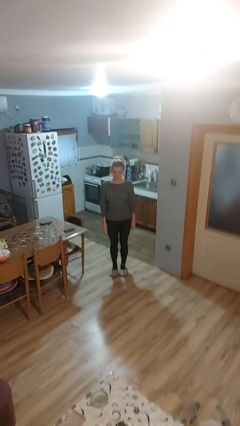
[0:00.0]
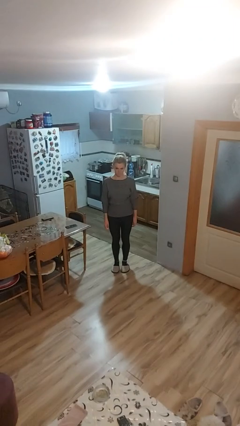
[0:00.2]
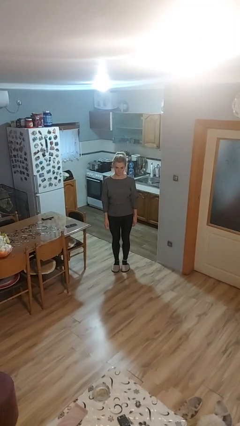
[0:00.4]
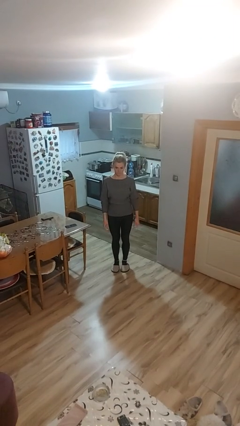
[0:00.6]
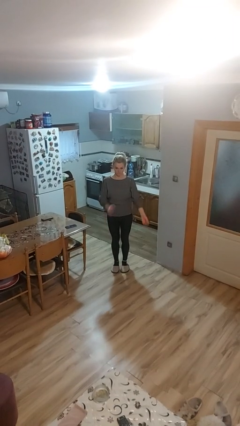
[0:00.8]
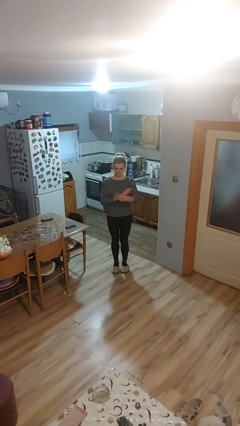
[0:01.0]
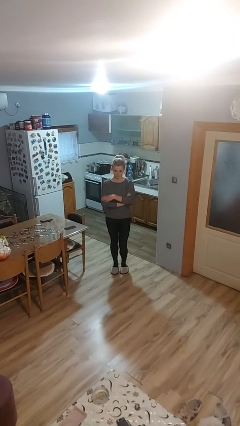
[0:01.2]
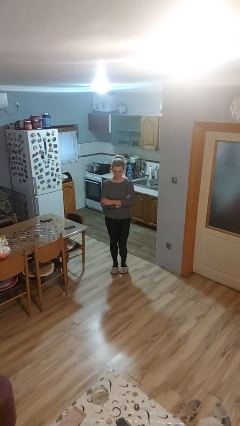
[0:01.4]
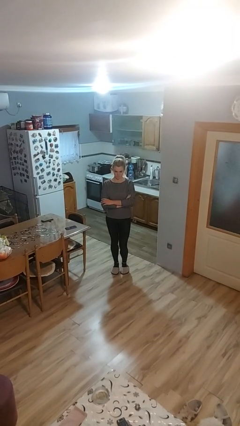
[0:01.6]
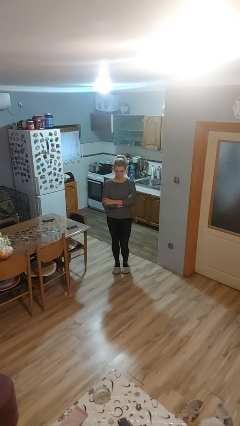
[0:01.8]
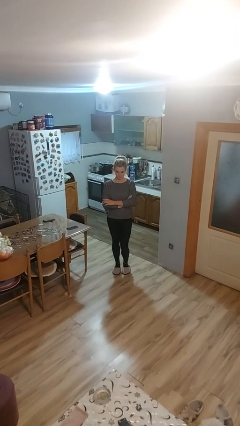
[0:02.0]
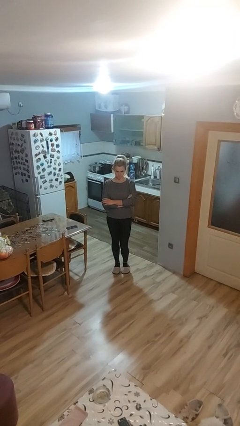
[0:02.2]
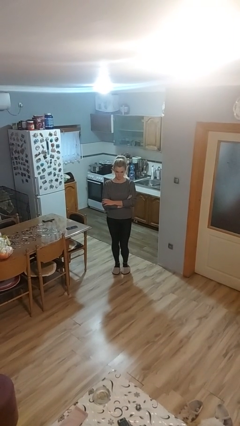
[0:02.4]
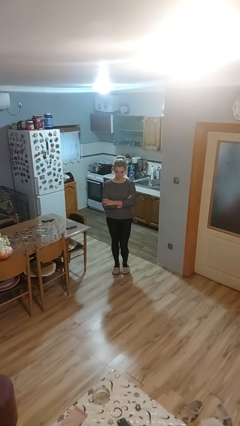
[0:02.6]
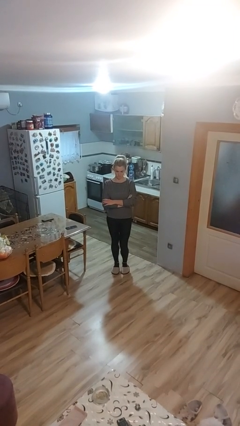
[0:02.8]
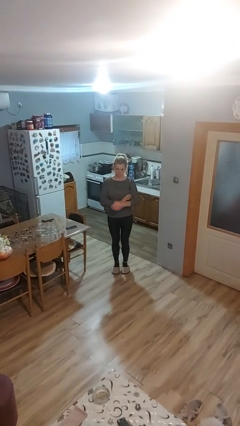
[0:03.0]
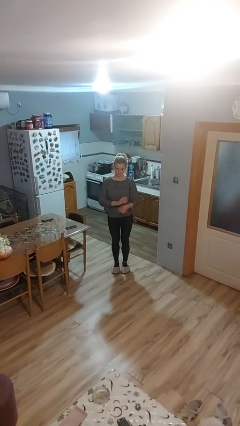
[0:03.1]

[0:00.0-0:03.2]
person crosses arms

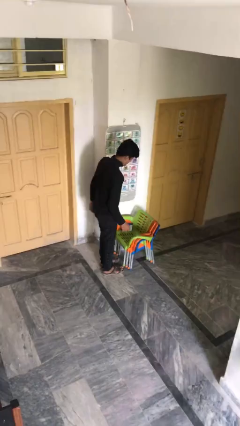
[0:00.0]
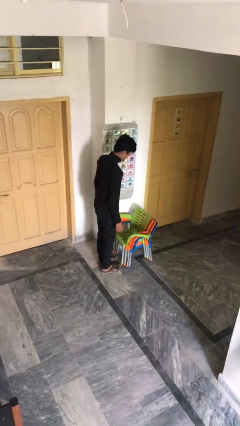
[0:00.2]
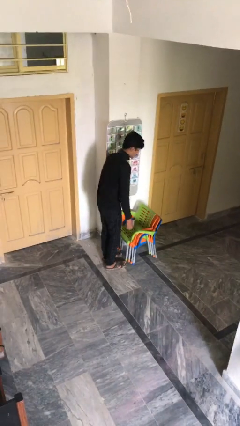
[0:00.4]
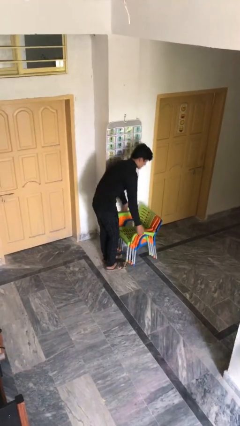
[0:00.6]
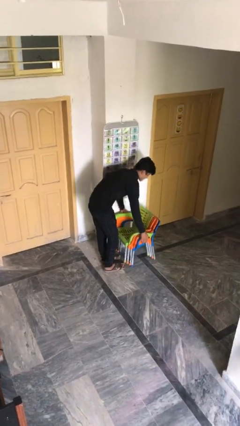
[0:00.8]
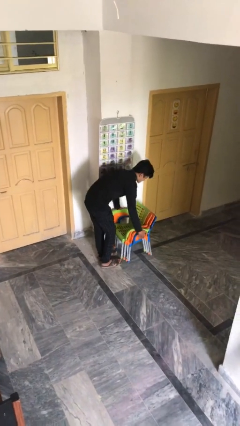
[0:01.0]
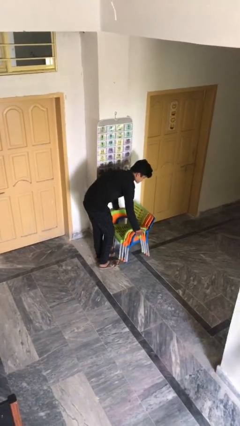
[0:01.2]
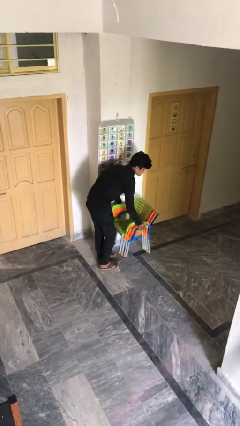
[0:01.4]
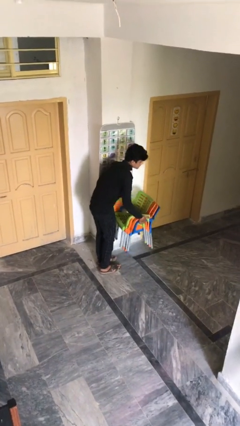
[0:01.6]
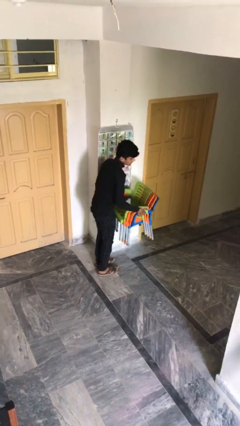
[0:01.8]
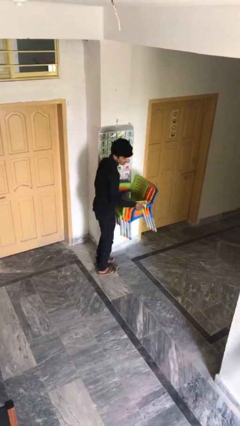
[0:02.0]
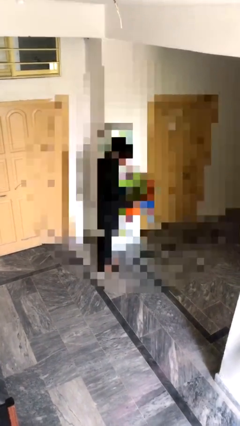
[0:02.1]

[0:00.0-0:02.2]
person picks up object from floor

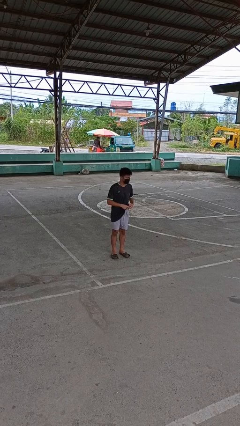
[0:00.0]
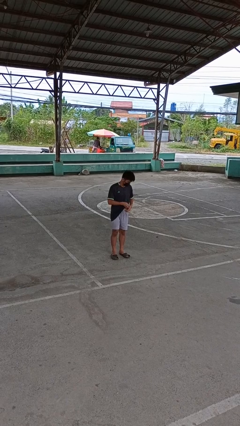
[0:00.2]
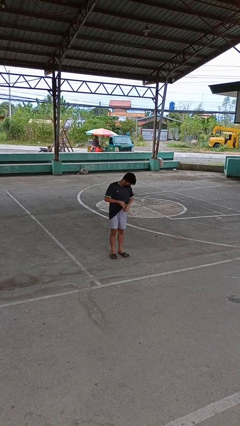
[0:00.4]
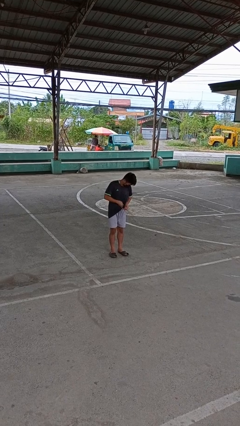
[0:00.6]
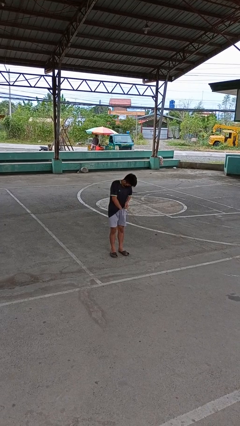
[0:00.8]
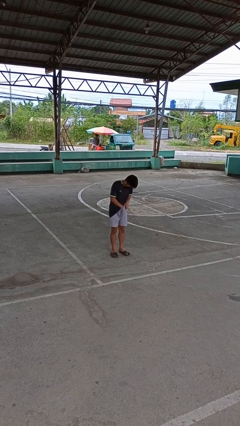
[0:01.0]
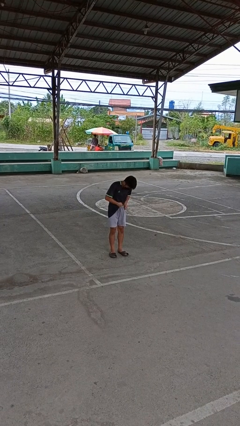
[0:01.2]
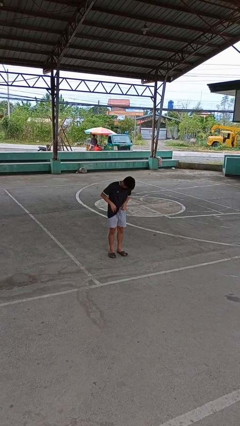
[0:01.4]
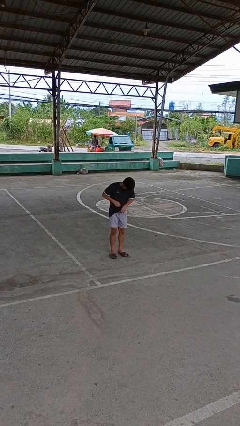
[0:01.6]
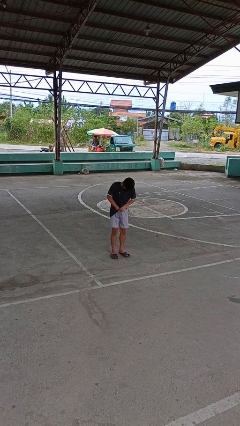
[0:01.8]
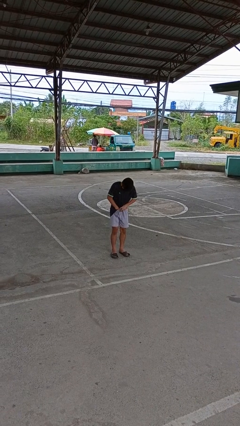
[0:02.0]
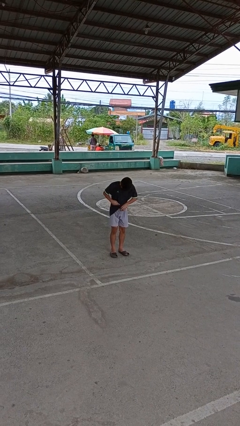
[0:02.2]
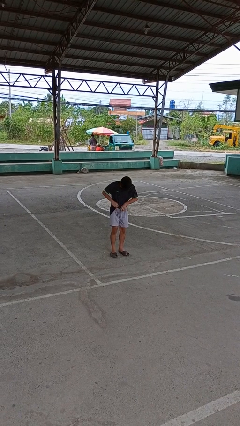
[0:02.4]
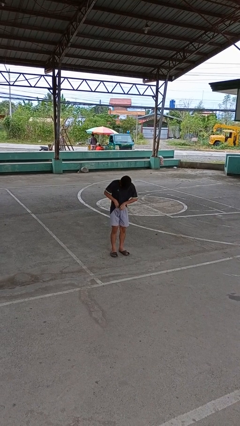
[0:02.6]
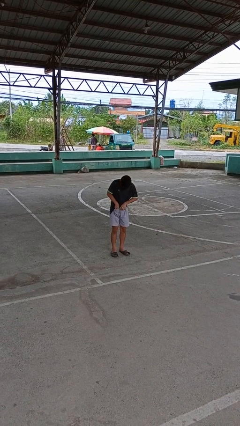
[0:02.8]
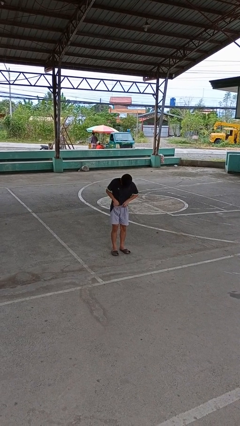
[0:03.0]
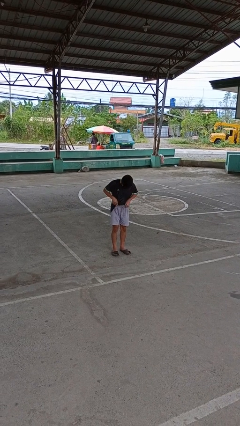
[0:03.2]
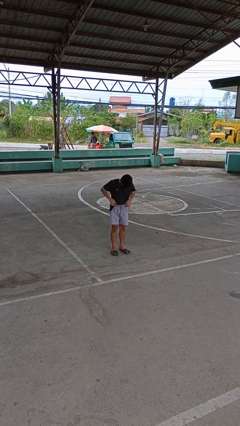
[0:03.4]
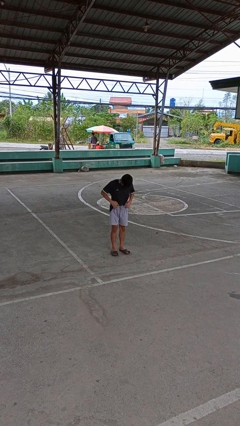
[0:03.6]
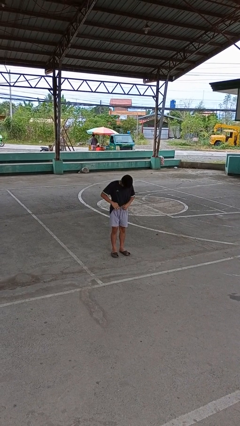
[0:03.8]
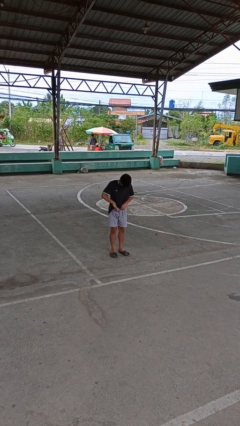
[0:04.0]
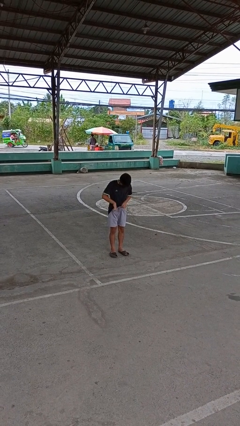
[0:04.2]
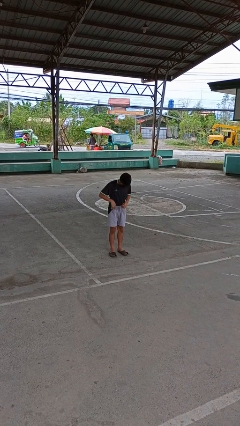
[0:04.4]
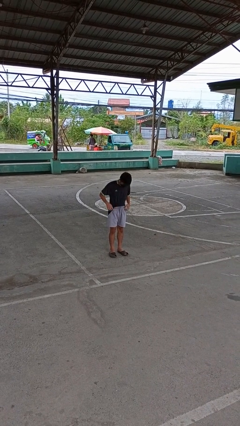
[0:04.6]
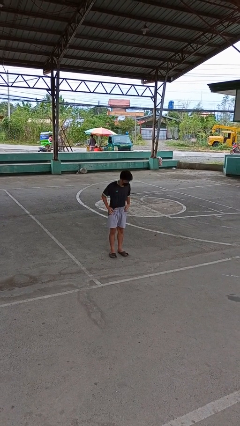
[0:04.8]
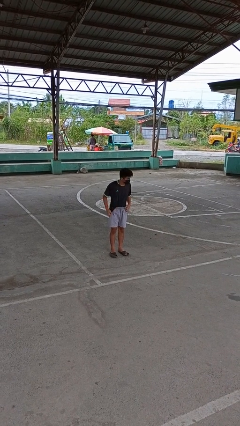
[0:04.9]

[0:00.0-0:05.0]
person tucks in shirt

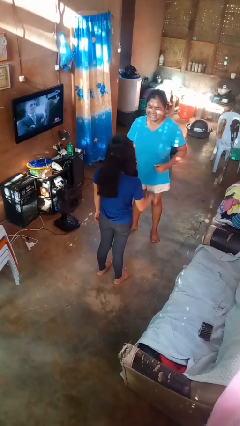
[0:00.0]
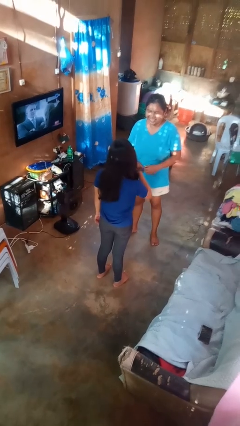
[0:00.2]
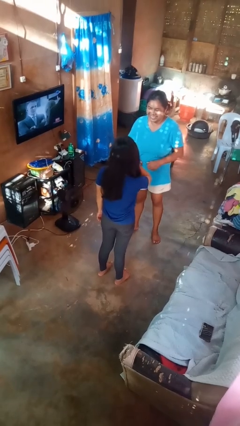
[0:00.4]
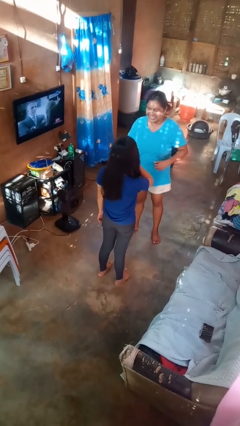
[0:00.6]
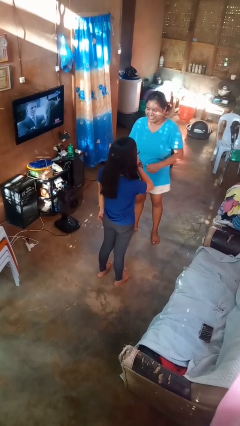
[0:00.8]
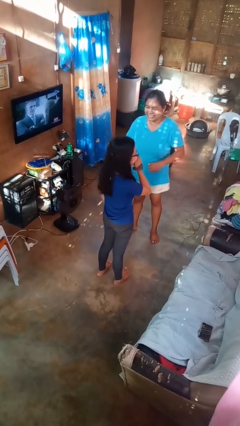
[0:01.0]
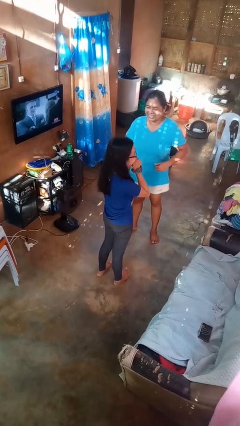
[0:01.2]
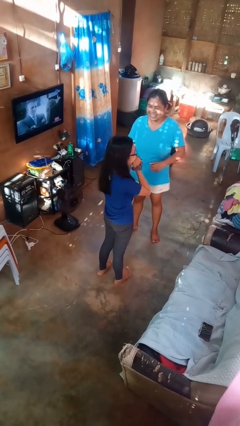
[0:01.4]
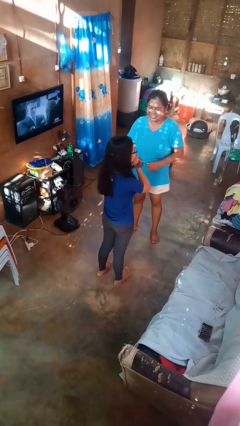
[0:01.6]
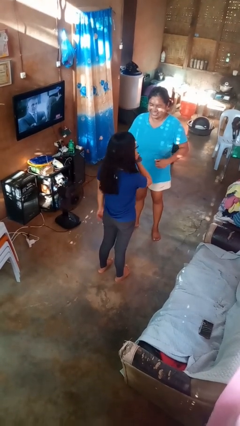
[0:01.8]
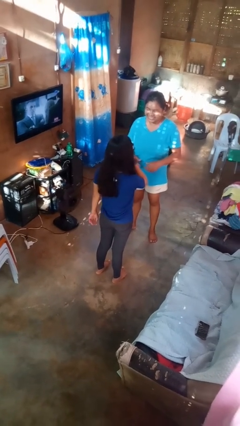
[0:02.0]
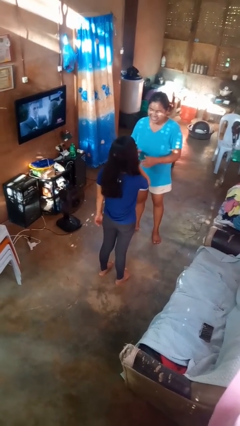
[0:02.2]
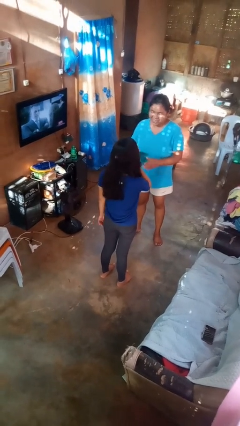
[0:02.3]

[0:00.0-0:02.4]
person laughs with person

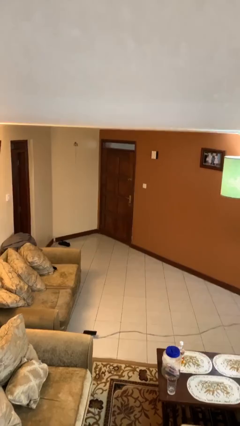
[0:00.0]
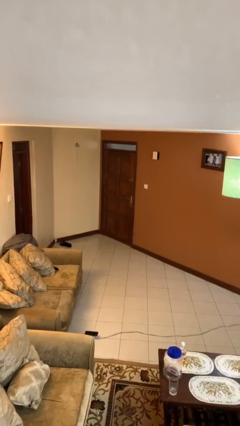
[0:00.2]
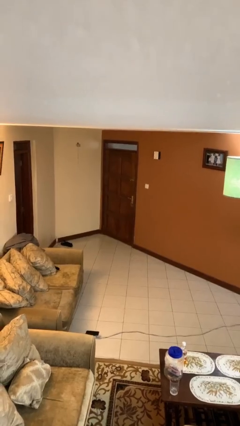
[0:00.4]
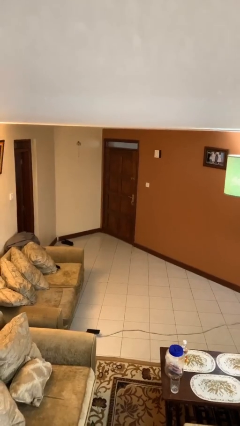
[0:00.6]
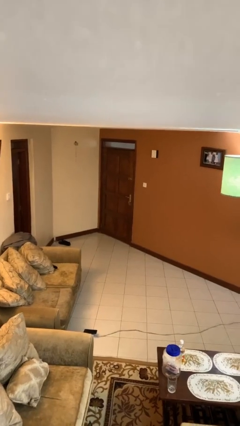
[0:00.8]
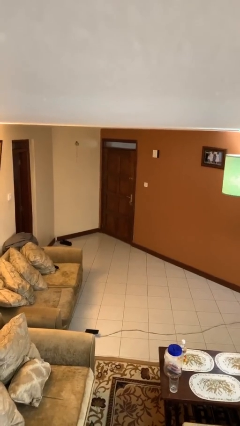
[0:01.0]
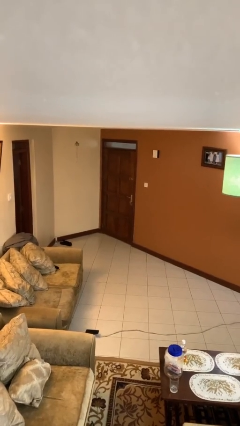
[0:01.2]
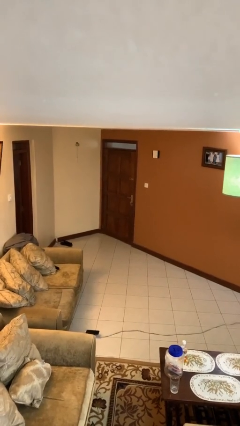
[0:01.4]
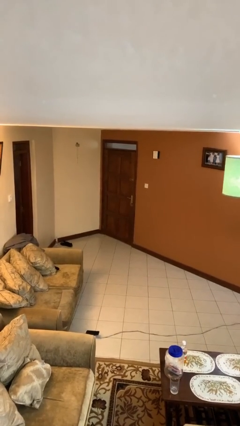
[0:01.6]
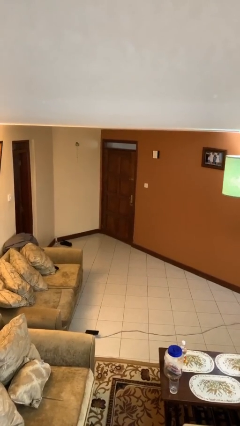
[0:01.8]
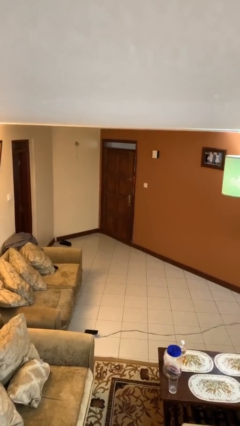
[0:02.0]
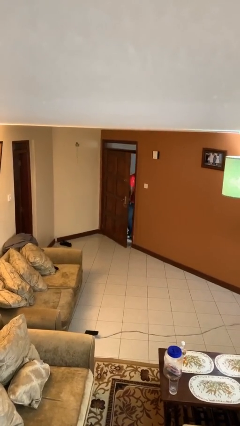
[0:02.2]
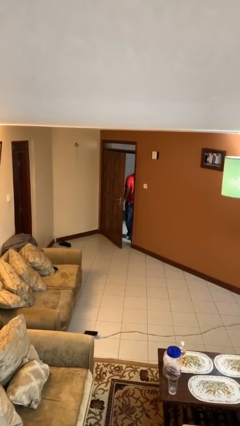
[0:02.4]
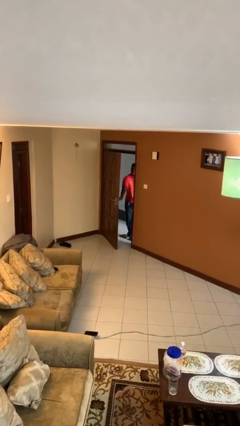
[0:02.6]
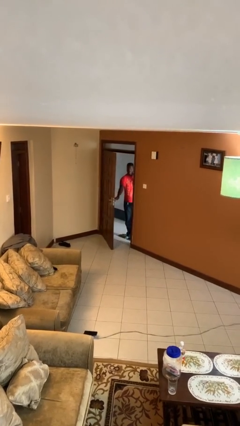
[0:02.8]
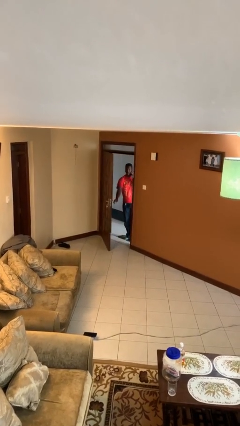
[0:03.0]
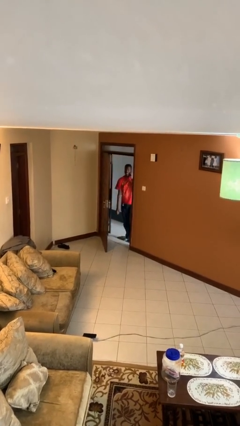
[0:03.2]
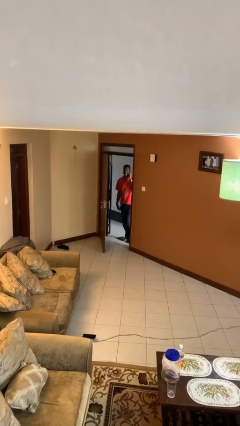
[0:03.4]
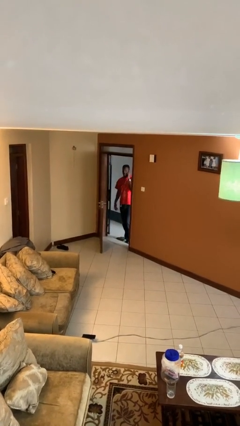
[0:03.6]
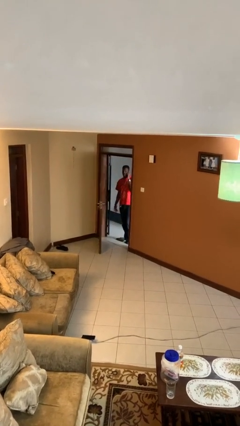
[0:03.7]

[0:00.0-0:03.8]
person opens facility door

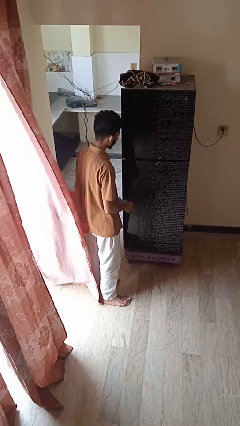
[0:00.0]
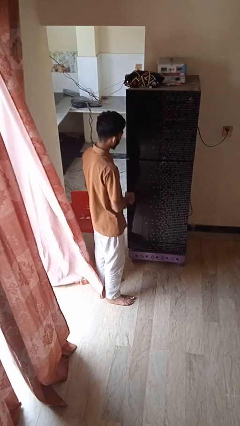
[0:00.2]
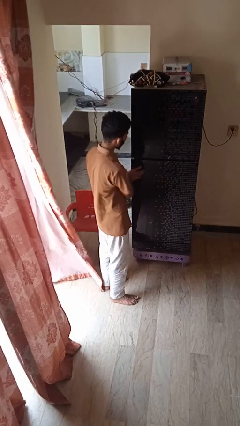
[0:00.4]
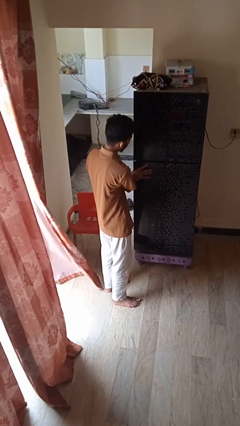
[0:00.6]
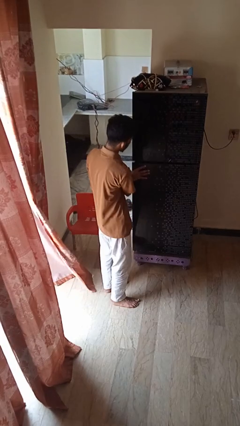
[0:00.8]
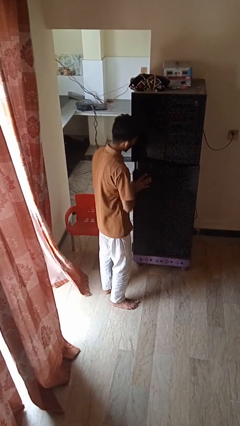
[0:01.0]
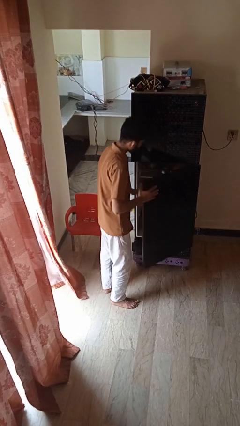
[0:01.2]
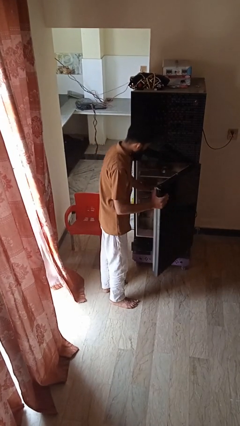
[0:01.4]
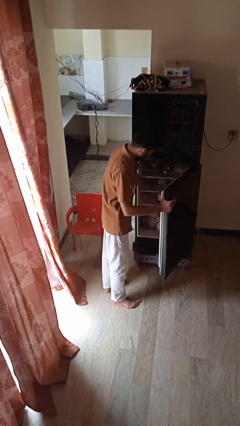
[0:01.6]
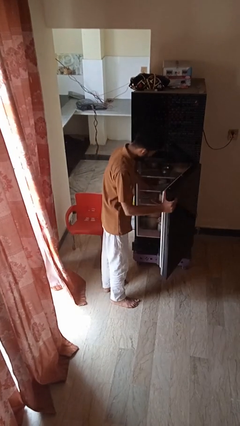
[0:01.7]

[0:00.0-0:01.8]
person takes object from refrigerator
